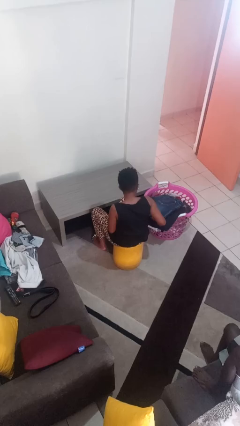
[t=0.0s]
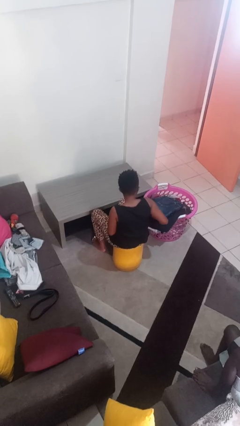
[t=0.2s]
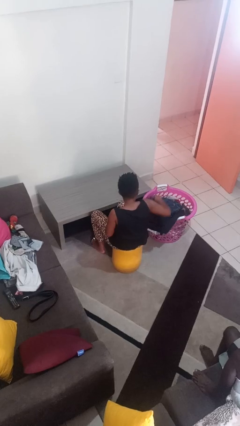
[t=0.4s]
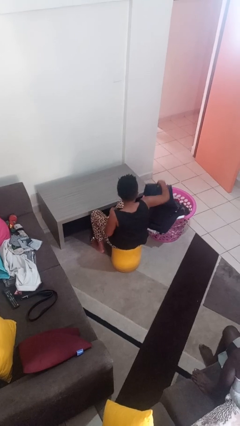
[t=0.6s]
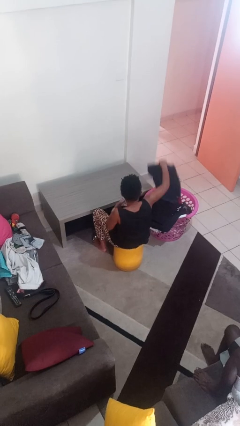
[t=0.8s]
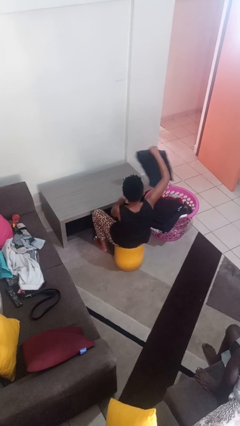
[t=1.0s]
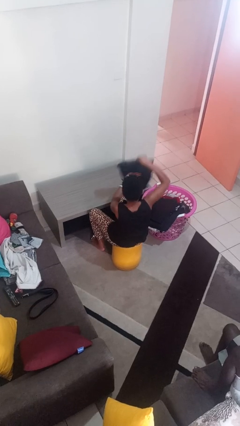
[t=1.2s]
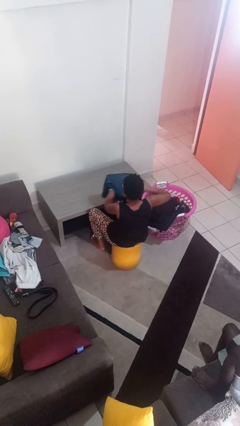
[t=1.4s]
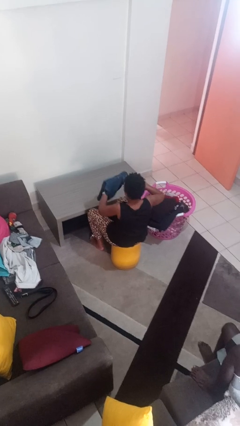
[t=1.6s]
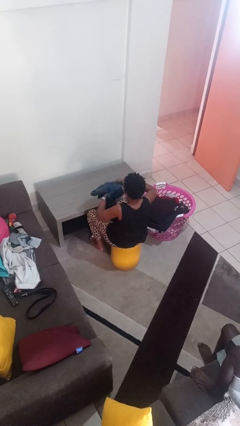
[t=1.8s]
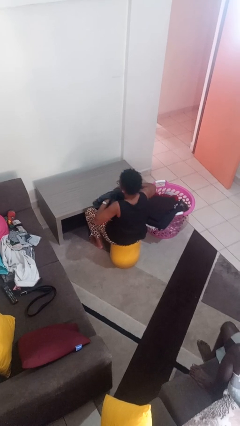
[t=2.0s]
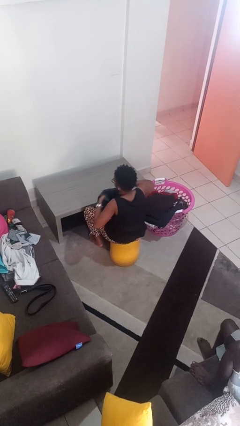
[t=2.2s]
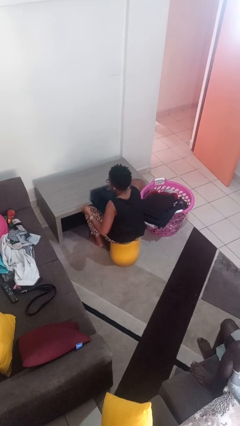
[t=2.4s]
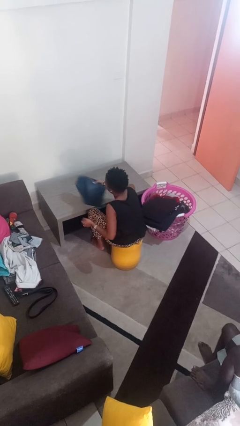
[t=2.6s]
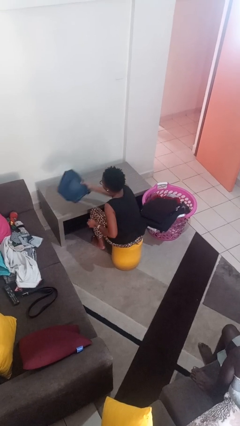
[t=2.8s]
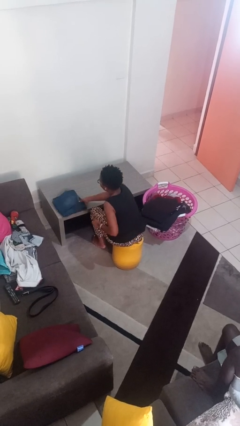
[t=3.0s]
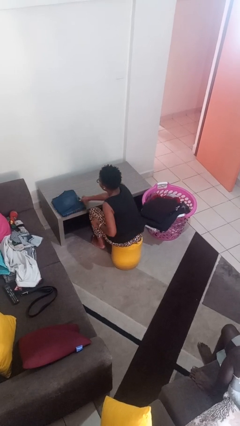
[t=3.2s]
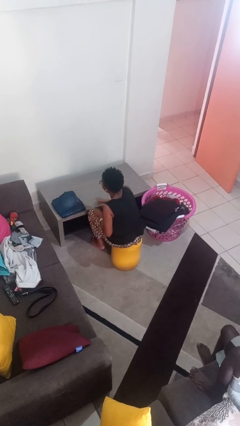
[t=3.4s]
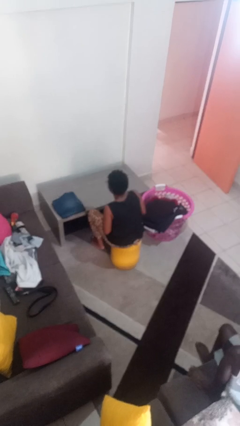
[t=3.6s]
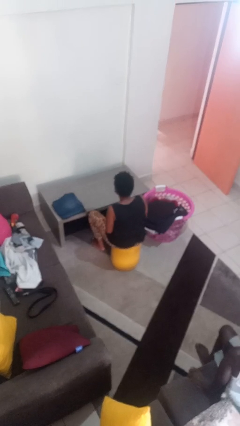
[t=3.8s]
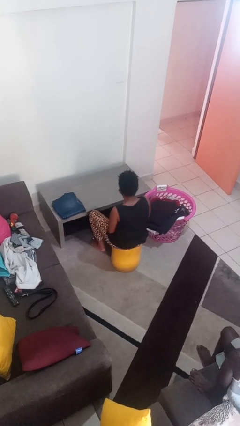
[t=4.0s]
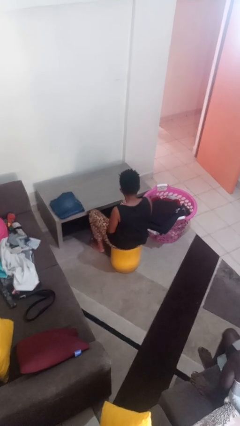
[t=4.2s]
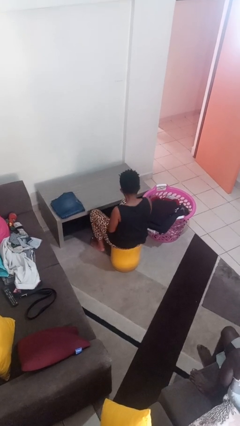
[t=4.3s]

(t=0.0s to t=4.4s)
person folds pants

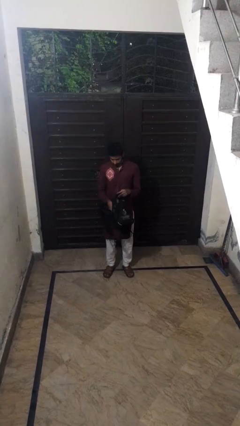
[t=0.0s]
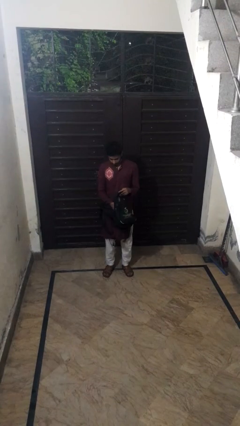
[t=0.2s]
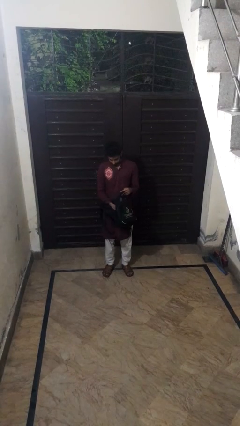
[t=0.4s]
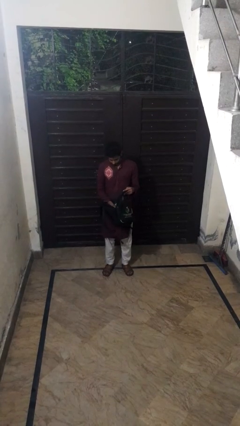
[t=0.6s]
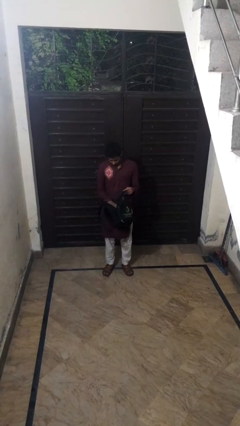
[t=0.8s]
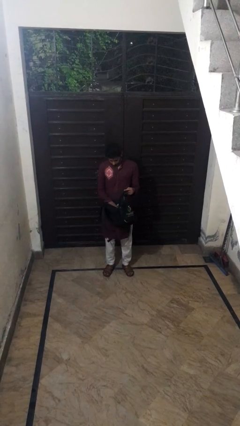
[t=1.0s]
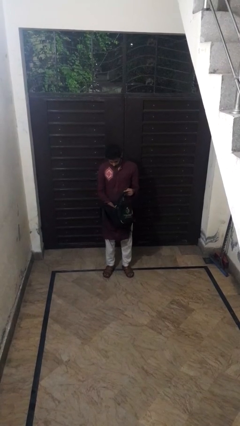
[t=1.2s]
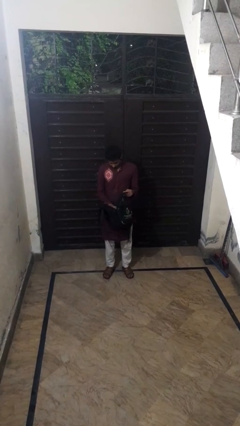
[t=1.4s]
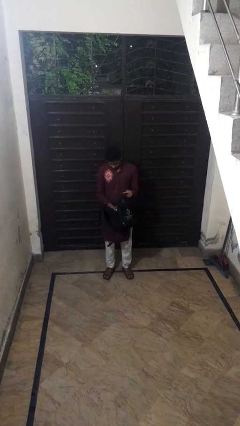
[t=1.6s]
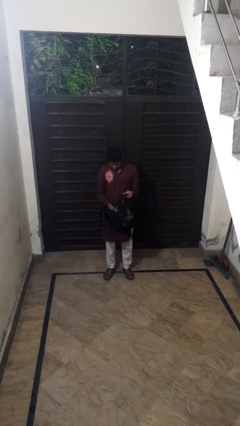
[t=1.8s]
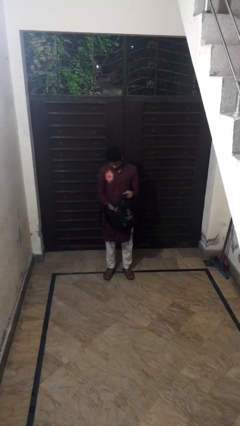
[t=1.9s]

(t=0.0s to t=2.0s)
person searches in backpack

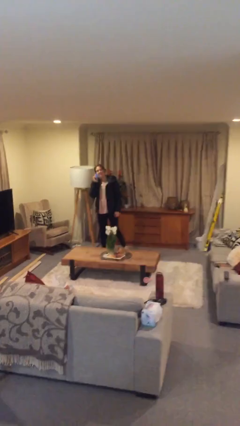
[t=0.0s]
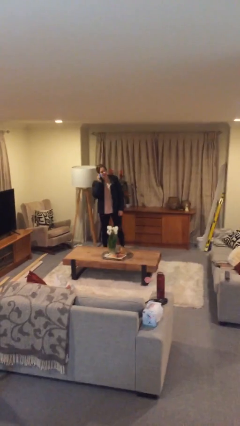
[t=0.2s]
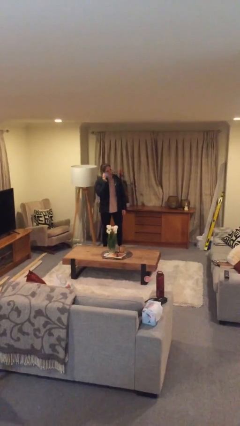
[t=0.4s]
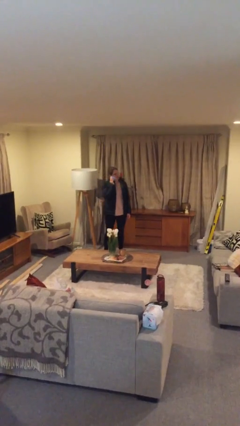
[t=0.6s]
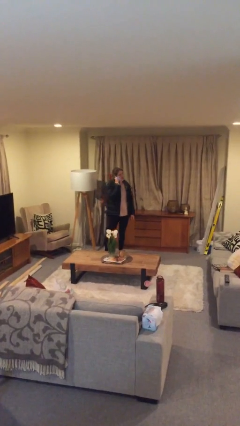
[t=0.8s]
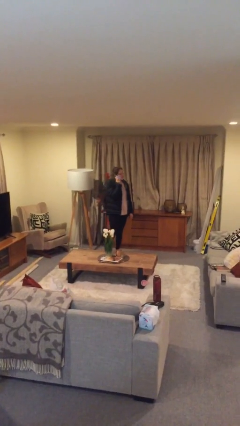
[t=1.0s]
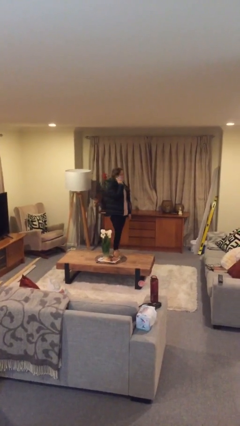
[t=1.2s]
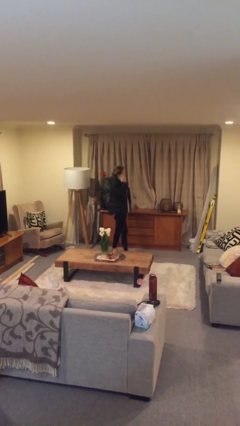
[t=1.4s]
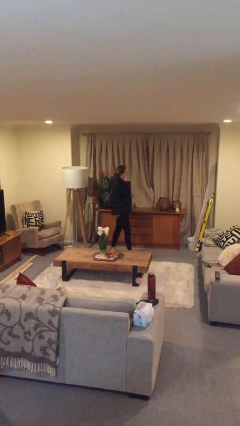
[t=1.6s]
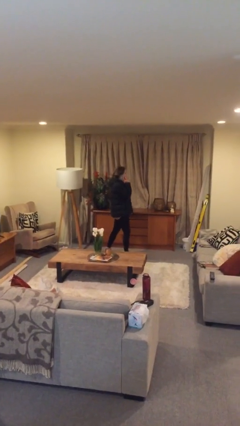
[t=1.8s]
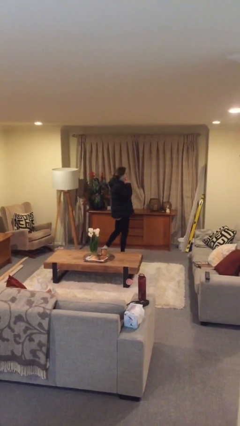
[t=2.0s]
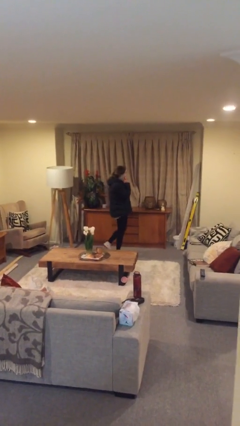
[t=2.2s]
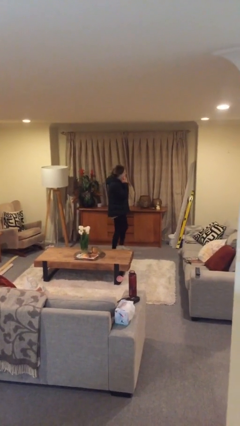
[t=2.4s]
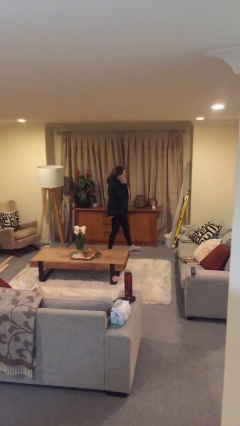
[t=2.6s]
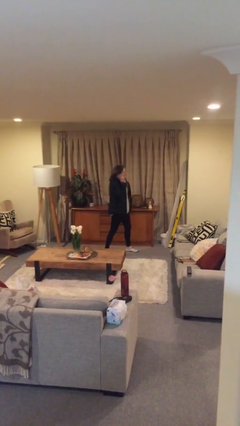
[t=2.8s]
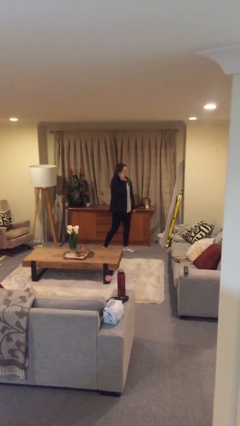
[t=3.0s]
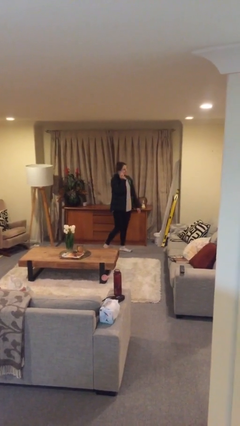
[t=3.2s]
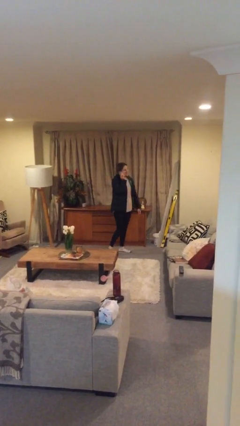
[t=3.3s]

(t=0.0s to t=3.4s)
person talks on phone

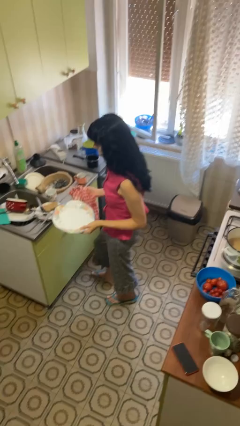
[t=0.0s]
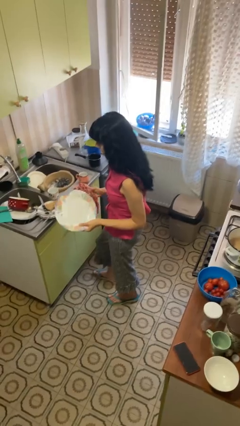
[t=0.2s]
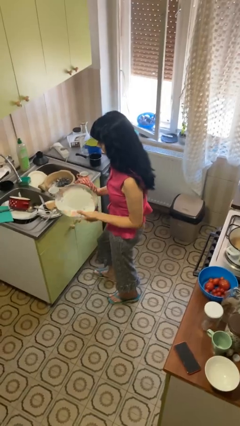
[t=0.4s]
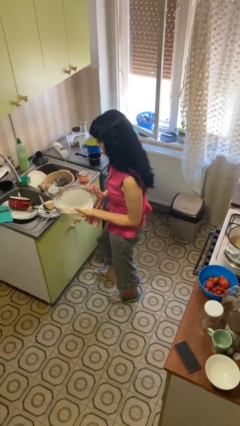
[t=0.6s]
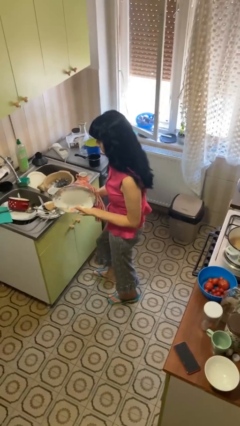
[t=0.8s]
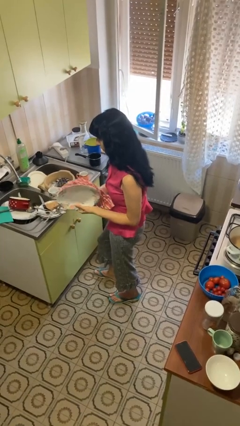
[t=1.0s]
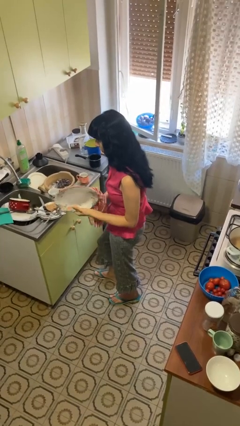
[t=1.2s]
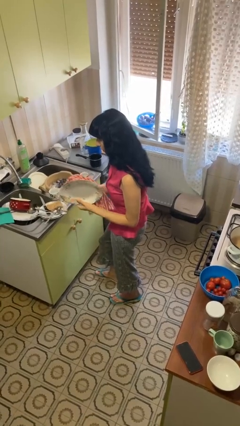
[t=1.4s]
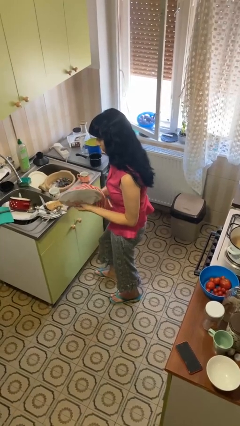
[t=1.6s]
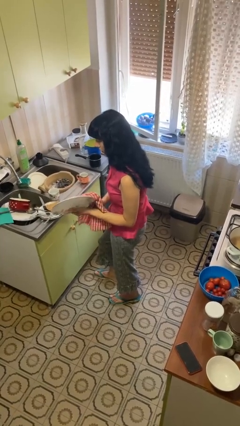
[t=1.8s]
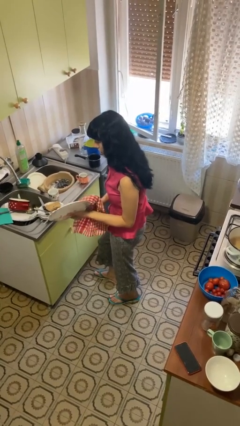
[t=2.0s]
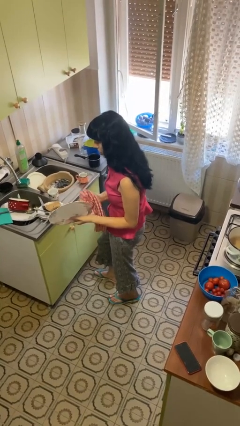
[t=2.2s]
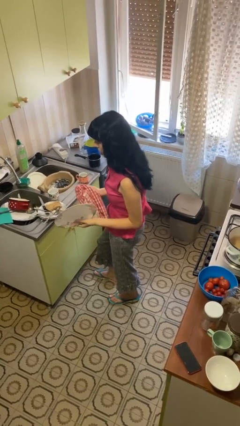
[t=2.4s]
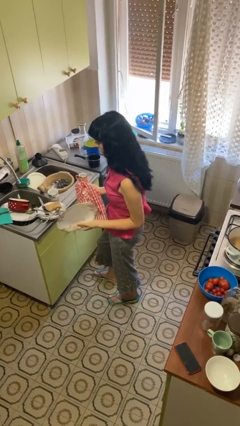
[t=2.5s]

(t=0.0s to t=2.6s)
person dries dish

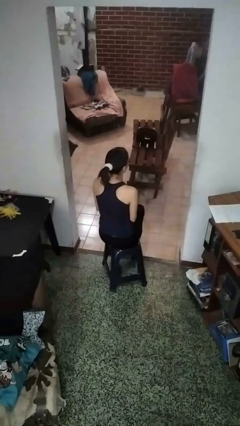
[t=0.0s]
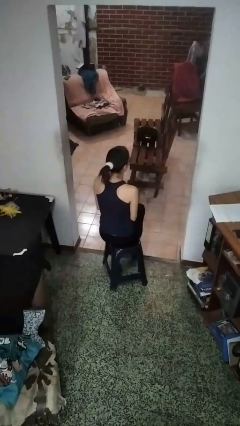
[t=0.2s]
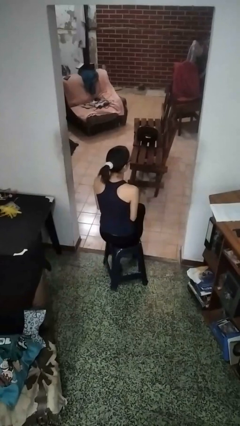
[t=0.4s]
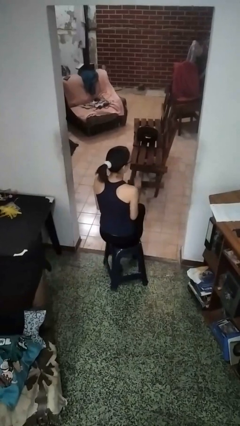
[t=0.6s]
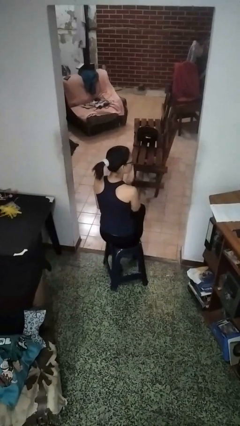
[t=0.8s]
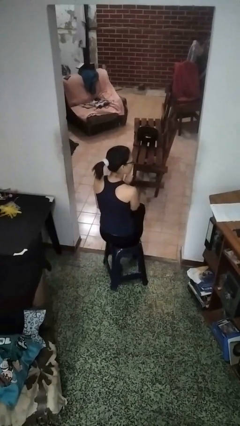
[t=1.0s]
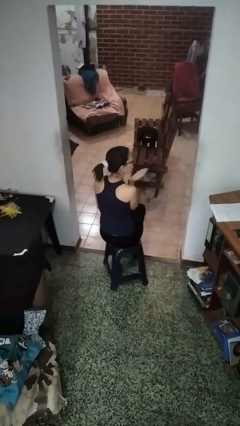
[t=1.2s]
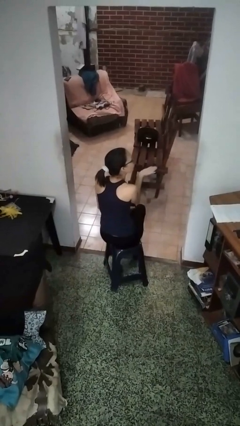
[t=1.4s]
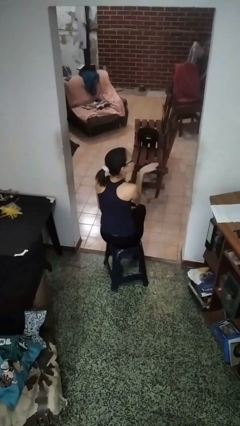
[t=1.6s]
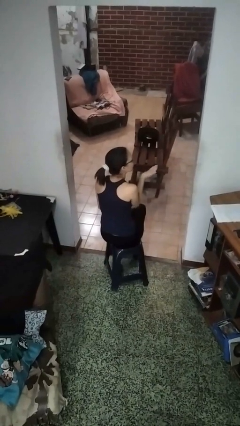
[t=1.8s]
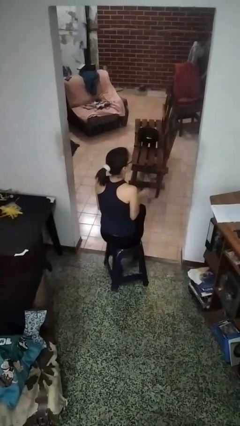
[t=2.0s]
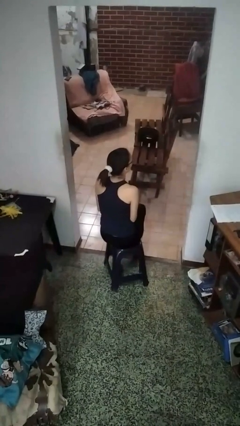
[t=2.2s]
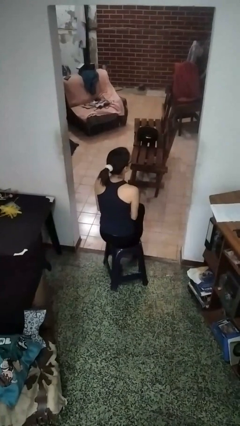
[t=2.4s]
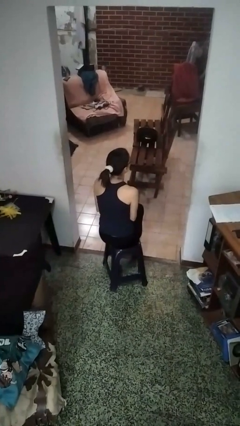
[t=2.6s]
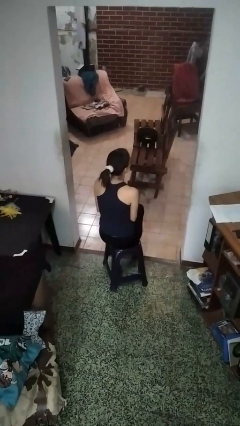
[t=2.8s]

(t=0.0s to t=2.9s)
person gestures blow kiss

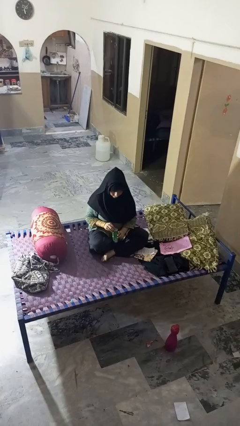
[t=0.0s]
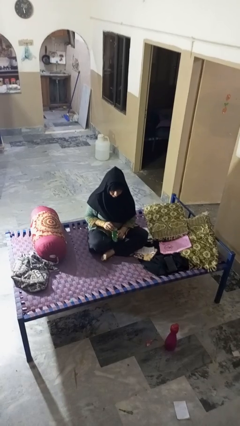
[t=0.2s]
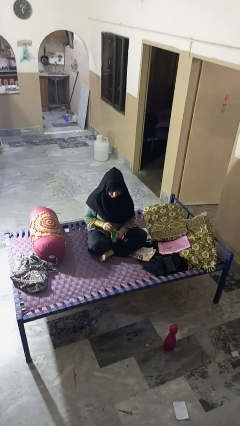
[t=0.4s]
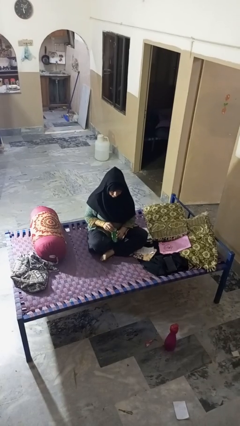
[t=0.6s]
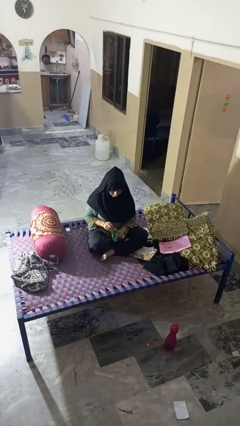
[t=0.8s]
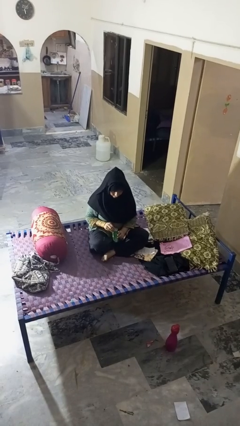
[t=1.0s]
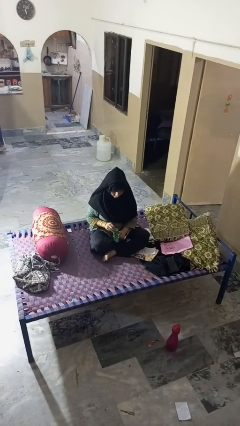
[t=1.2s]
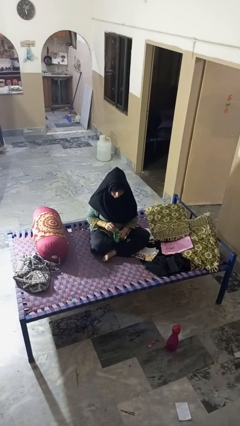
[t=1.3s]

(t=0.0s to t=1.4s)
person opens can with can opener

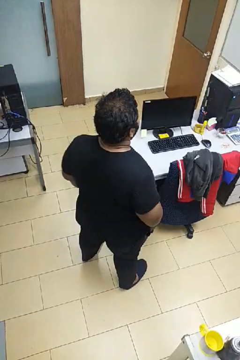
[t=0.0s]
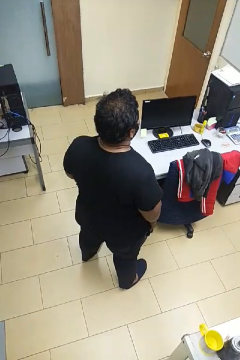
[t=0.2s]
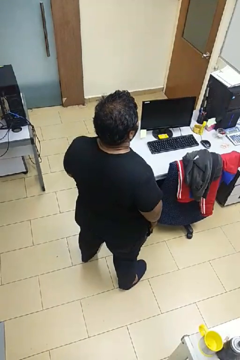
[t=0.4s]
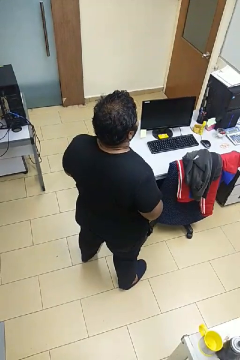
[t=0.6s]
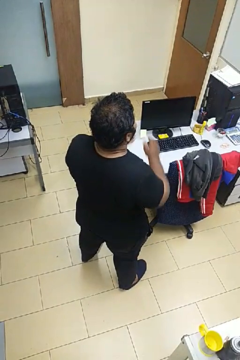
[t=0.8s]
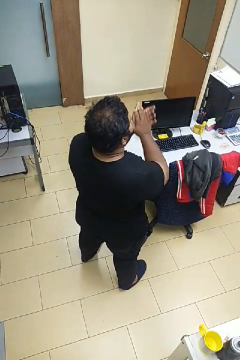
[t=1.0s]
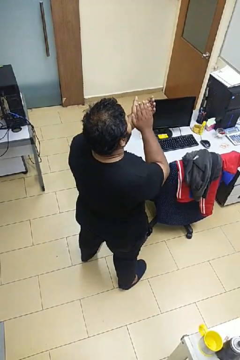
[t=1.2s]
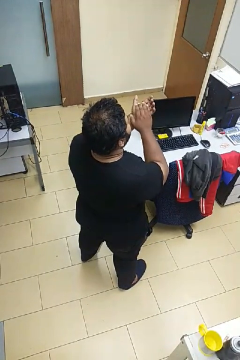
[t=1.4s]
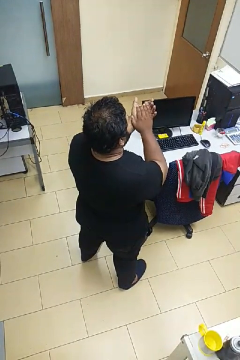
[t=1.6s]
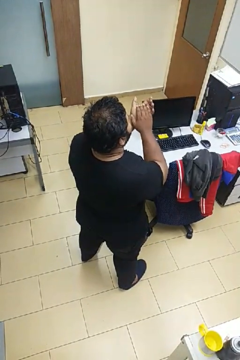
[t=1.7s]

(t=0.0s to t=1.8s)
person claps hands
